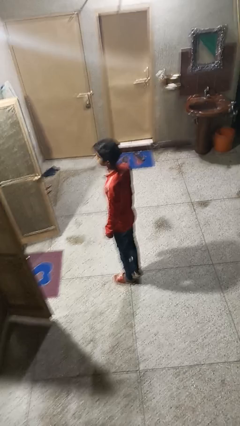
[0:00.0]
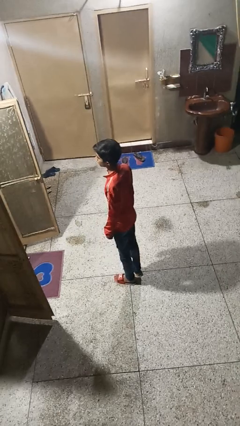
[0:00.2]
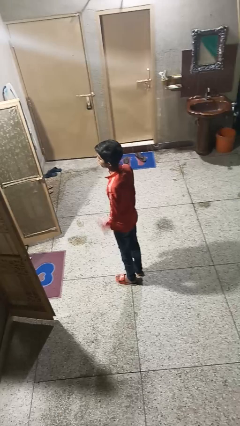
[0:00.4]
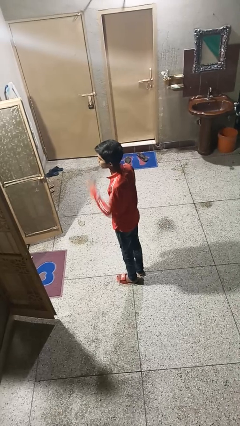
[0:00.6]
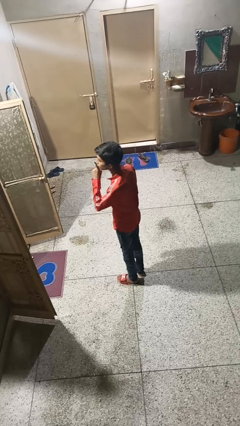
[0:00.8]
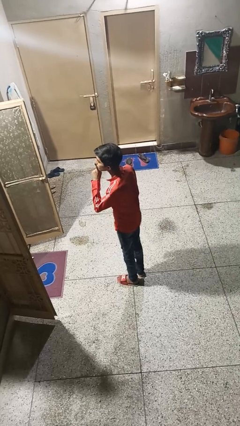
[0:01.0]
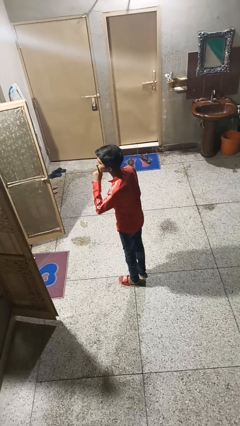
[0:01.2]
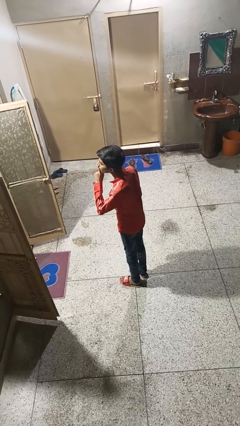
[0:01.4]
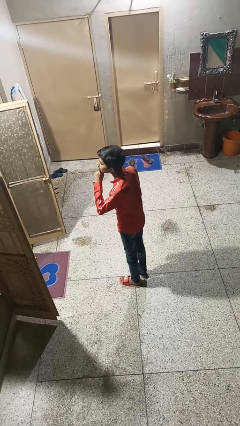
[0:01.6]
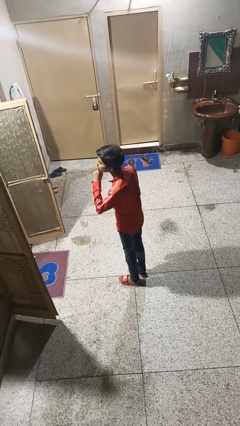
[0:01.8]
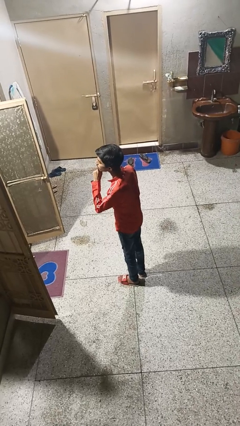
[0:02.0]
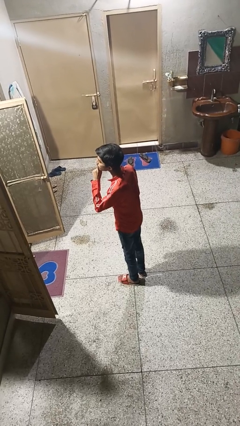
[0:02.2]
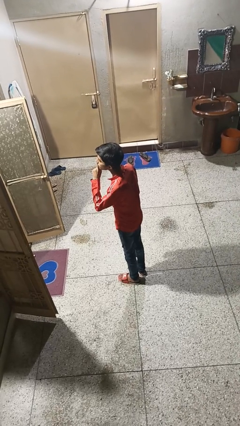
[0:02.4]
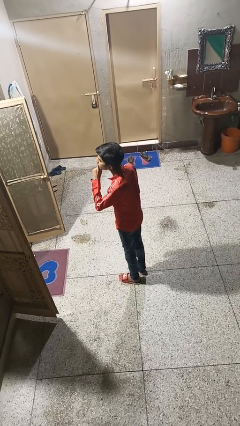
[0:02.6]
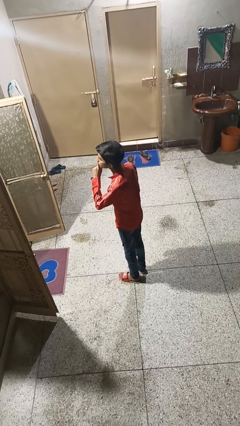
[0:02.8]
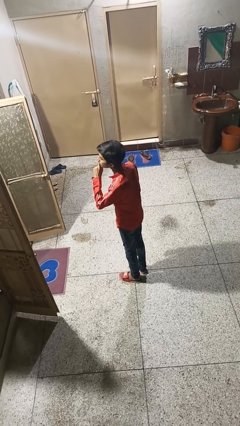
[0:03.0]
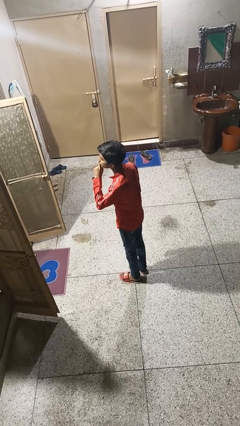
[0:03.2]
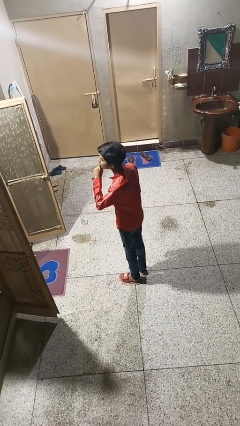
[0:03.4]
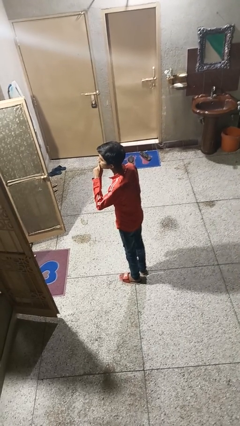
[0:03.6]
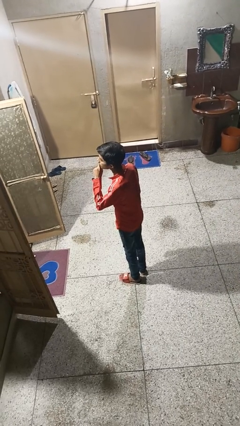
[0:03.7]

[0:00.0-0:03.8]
person gestures be quiet

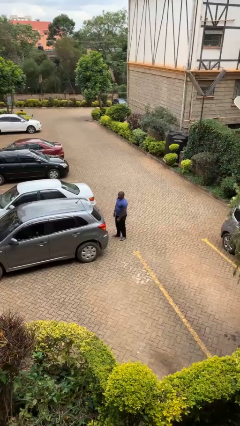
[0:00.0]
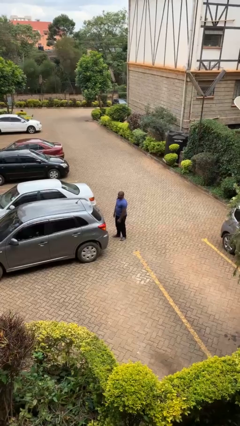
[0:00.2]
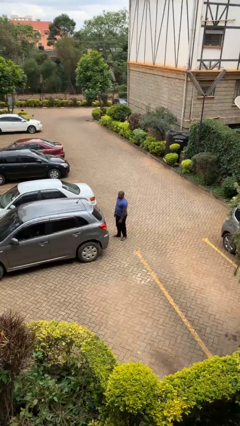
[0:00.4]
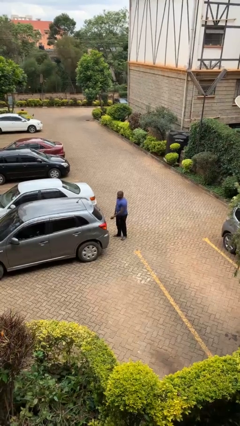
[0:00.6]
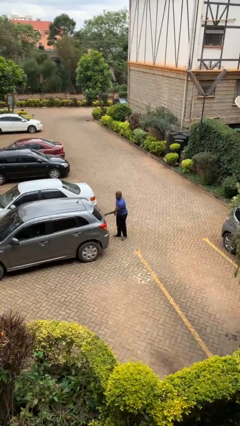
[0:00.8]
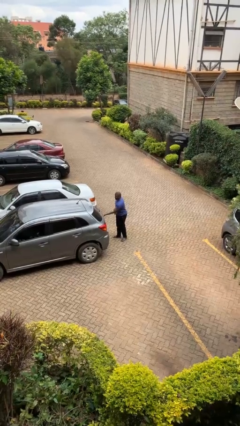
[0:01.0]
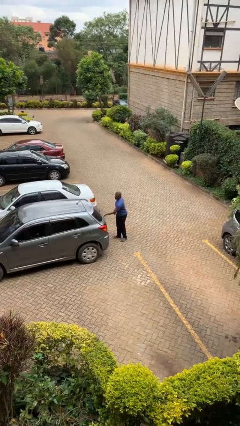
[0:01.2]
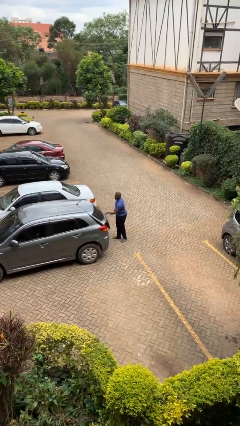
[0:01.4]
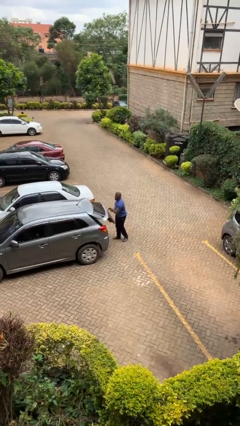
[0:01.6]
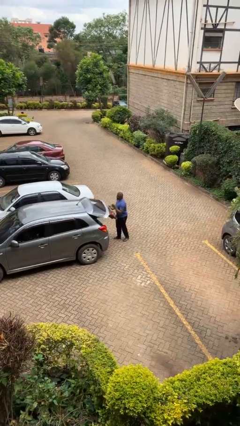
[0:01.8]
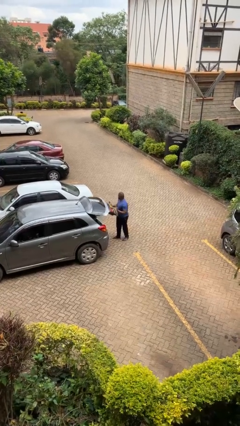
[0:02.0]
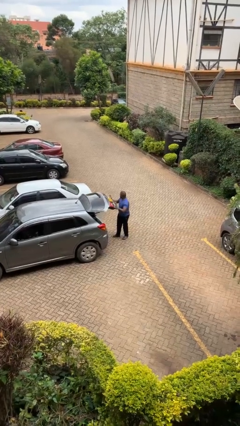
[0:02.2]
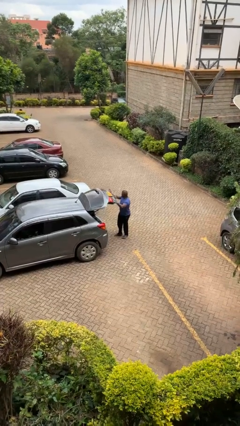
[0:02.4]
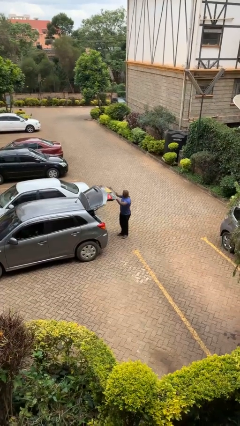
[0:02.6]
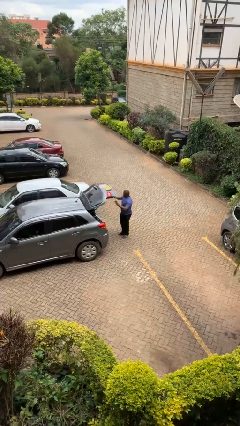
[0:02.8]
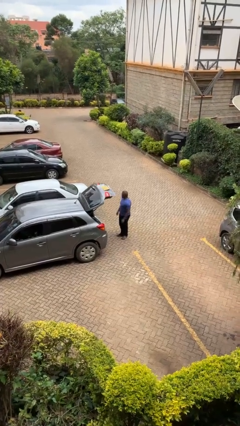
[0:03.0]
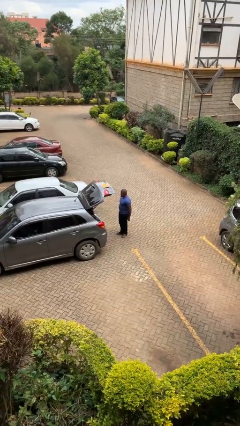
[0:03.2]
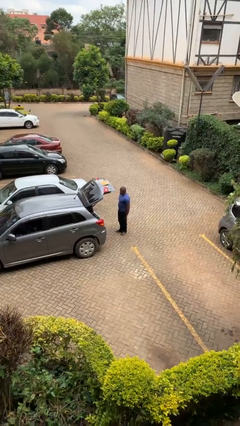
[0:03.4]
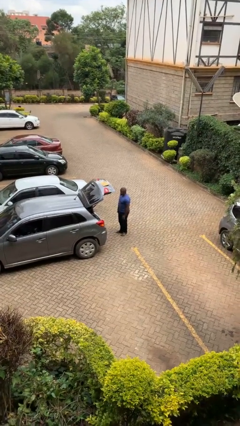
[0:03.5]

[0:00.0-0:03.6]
person opens car trunk

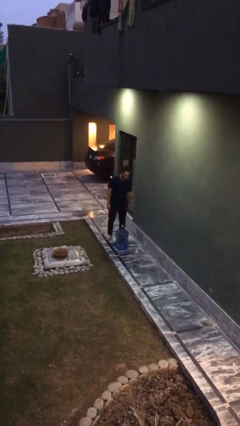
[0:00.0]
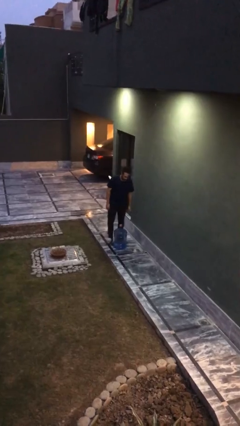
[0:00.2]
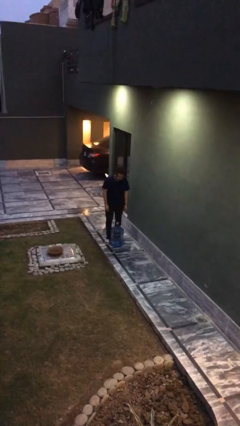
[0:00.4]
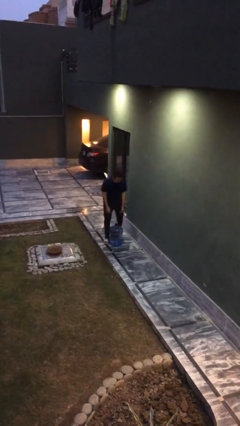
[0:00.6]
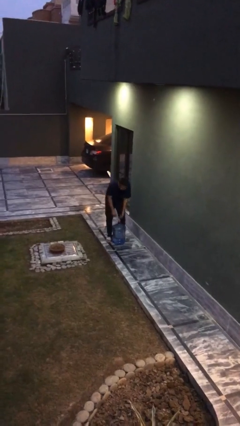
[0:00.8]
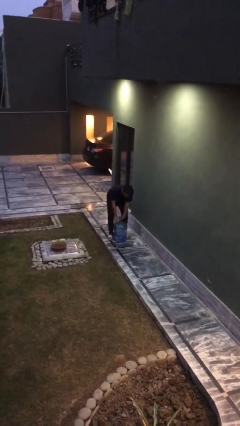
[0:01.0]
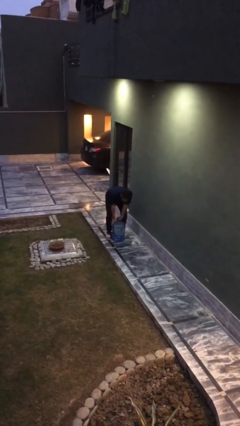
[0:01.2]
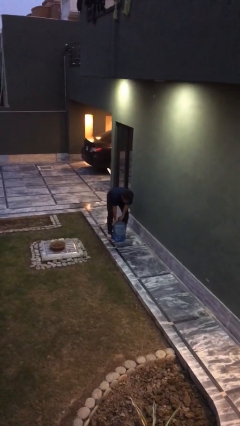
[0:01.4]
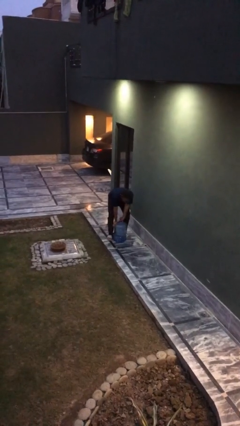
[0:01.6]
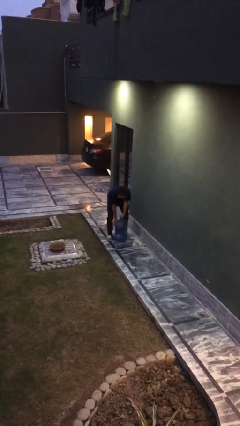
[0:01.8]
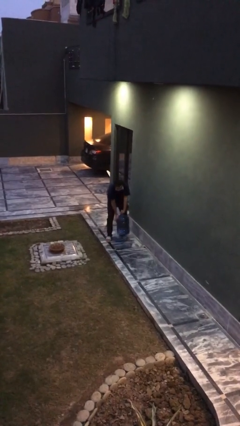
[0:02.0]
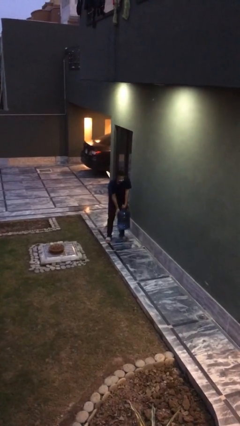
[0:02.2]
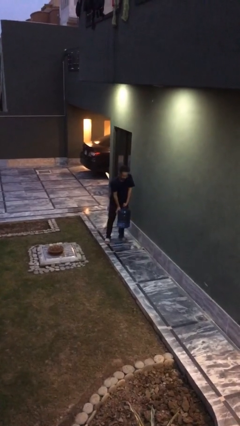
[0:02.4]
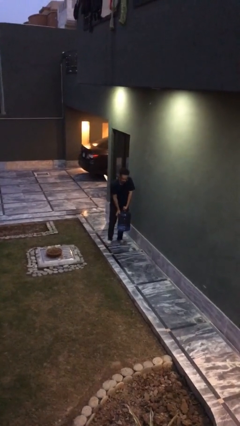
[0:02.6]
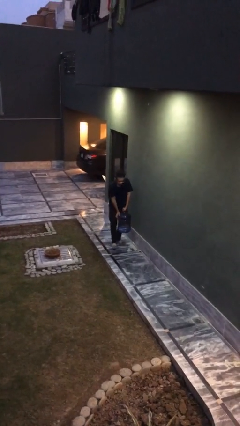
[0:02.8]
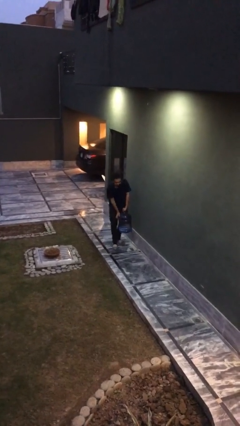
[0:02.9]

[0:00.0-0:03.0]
person picks up object from floor

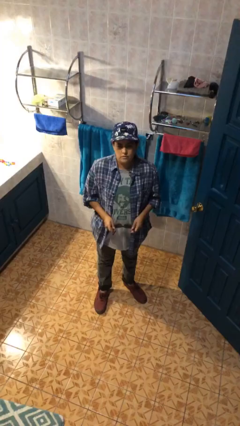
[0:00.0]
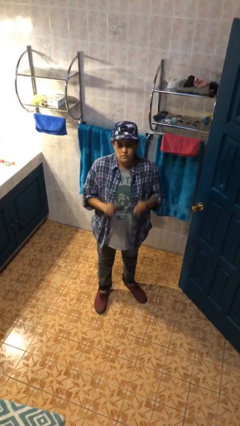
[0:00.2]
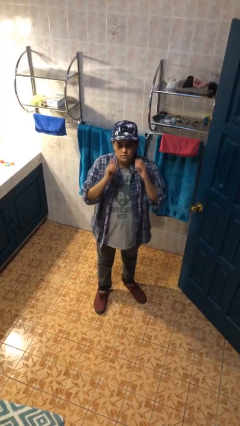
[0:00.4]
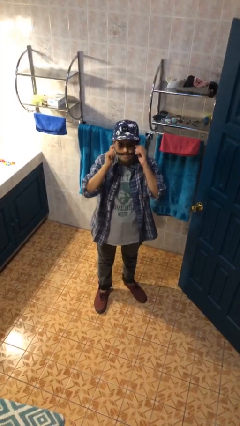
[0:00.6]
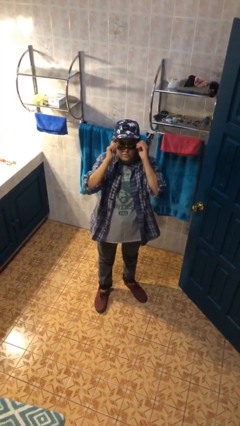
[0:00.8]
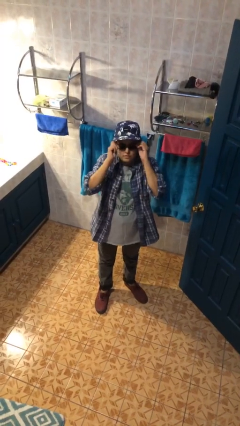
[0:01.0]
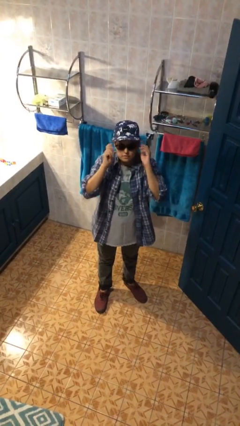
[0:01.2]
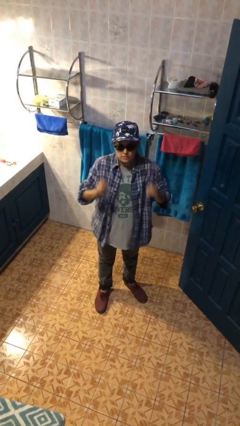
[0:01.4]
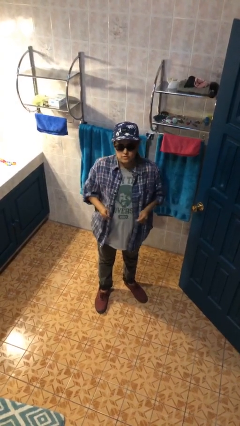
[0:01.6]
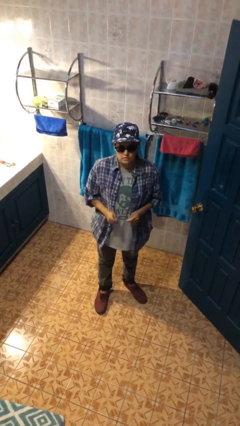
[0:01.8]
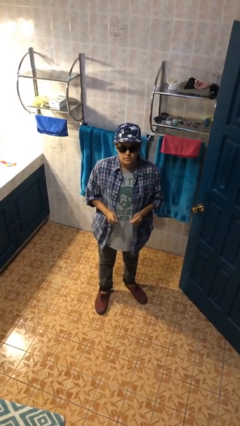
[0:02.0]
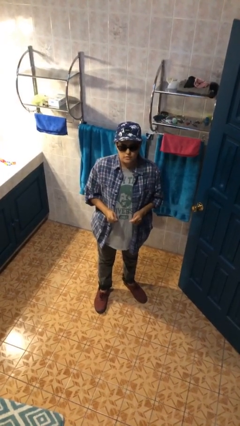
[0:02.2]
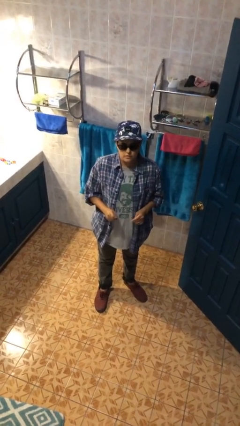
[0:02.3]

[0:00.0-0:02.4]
person puts on sunglasses

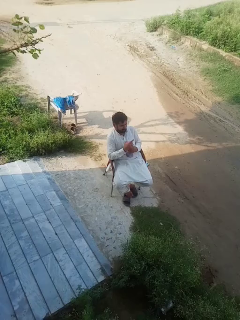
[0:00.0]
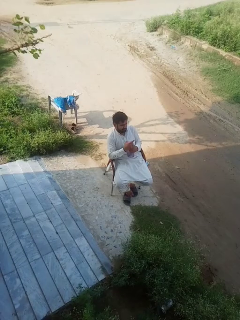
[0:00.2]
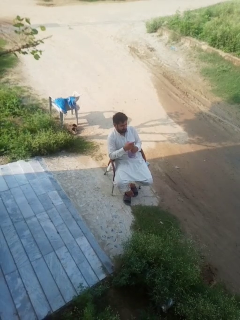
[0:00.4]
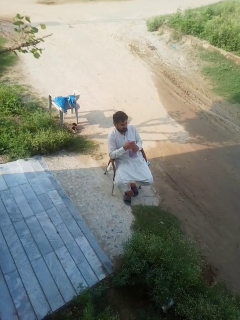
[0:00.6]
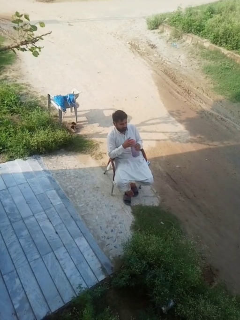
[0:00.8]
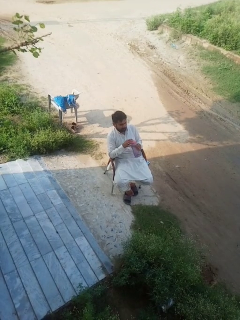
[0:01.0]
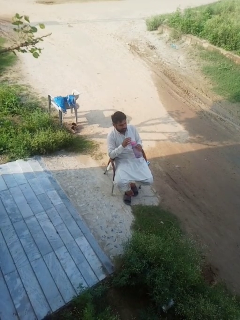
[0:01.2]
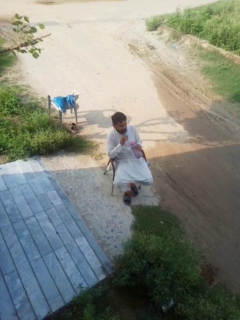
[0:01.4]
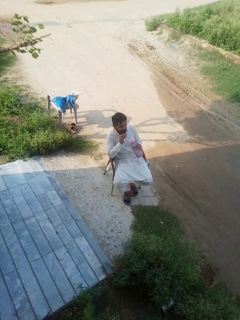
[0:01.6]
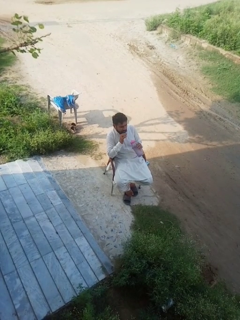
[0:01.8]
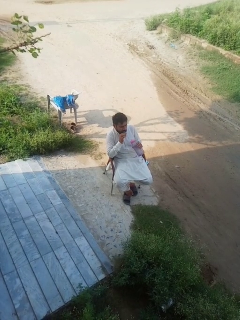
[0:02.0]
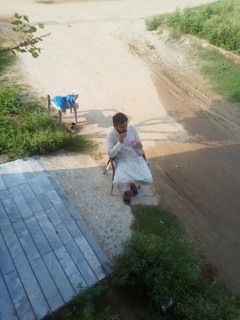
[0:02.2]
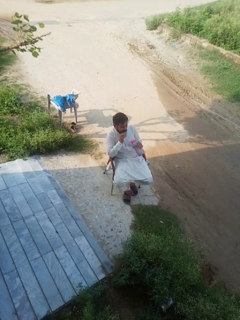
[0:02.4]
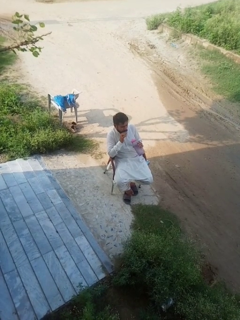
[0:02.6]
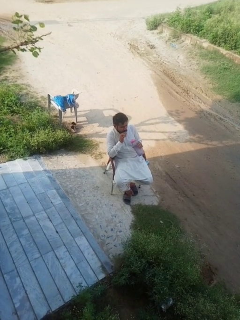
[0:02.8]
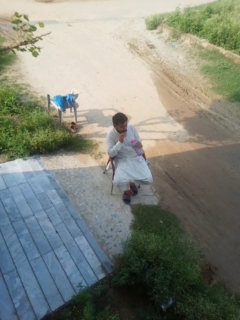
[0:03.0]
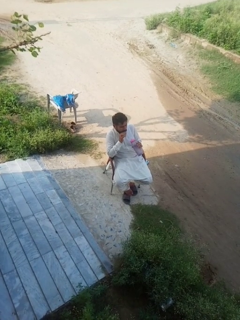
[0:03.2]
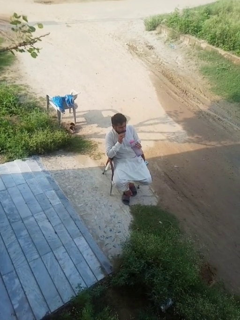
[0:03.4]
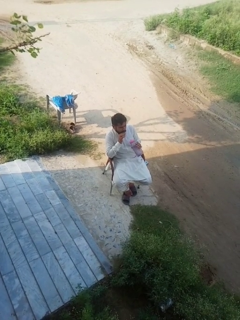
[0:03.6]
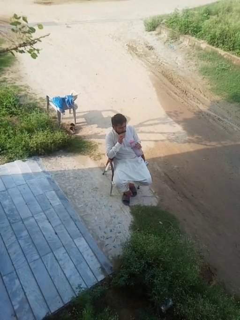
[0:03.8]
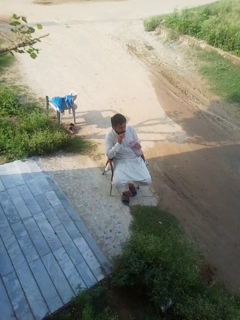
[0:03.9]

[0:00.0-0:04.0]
person drinks from straw

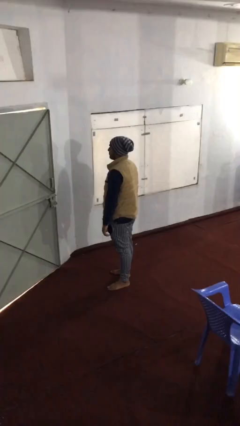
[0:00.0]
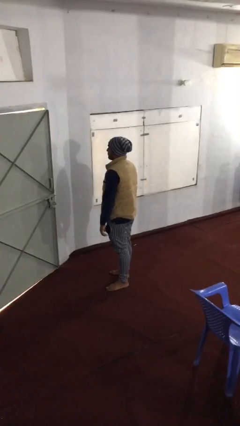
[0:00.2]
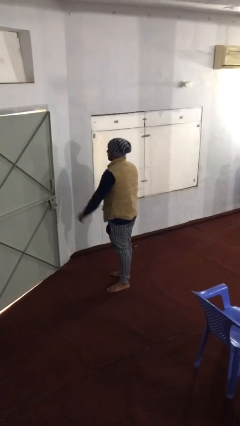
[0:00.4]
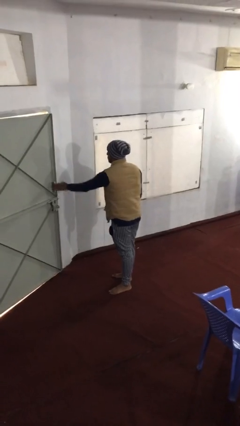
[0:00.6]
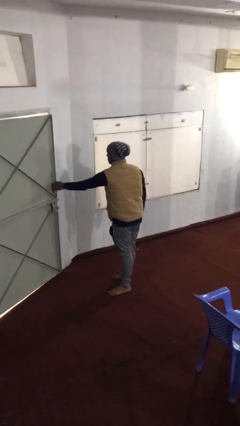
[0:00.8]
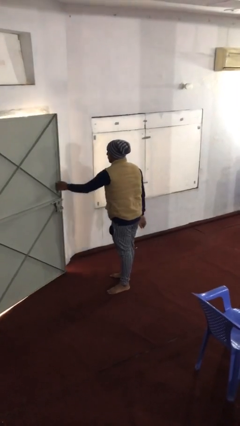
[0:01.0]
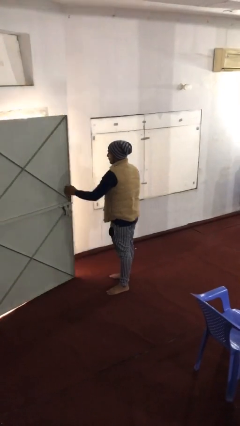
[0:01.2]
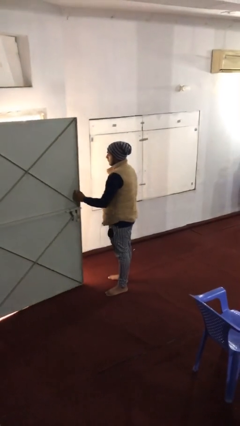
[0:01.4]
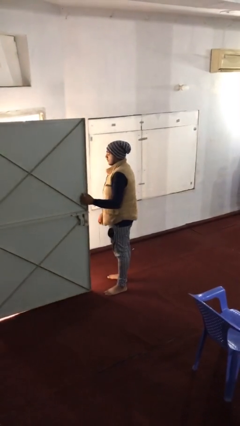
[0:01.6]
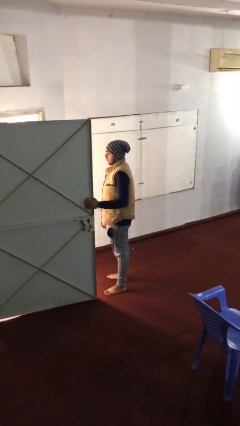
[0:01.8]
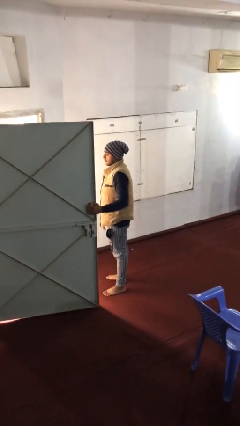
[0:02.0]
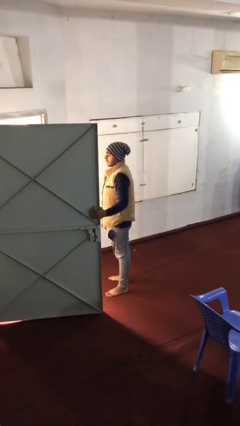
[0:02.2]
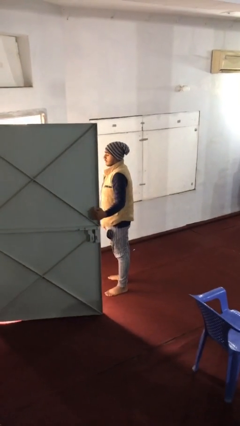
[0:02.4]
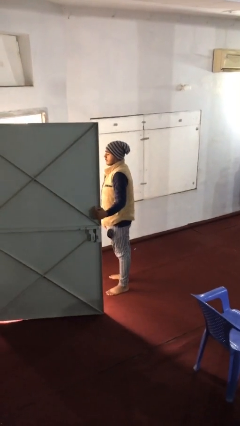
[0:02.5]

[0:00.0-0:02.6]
person opens facility door
